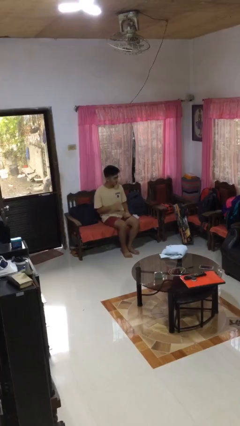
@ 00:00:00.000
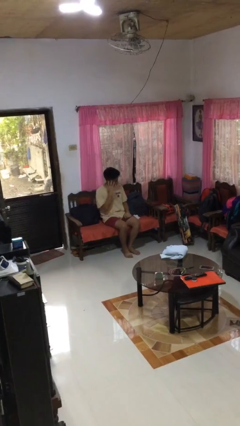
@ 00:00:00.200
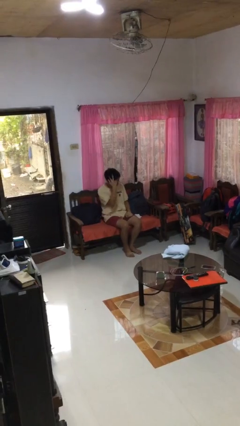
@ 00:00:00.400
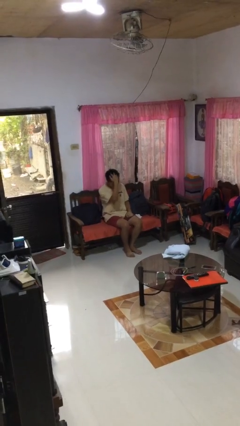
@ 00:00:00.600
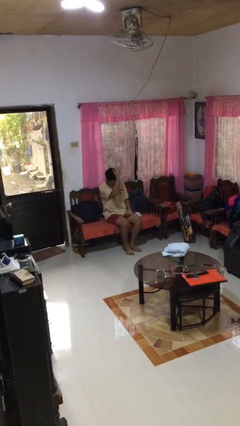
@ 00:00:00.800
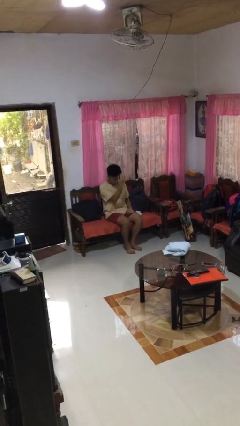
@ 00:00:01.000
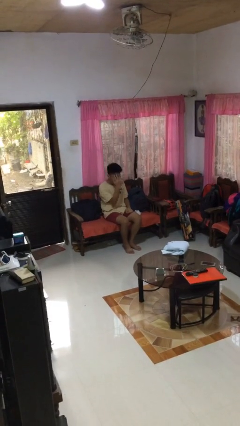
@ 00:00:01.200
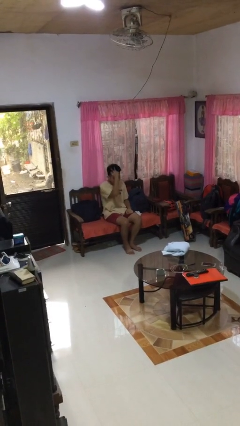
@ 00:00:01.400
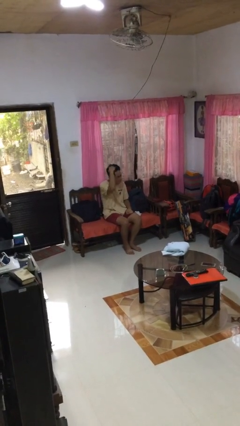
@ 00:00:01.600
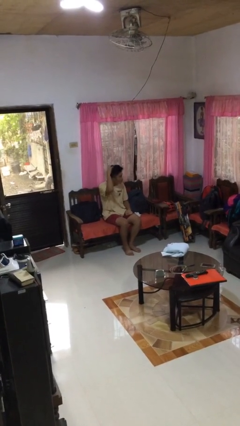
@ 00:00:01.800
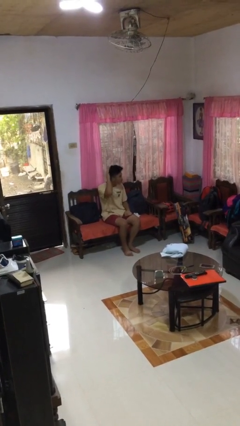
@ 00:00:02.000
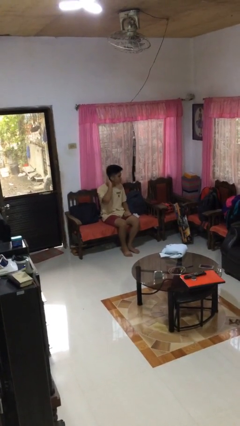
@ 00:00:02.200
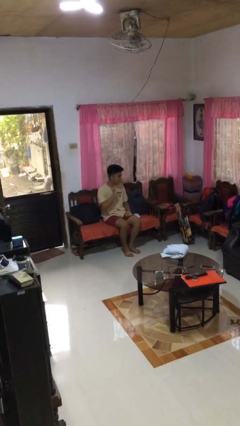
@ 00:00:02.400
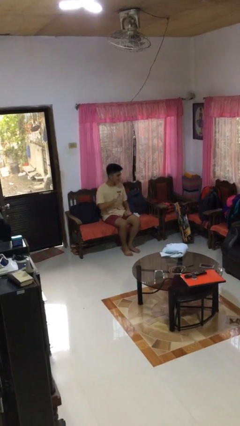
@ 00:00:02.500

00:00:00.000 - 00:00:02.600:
person strokes hair

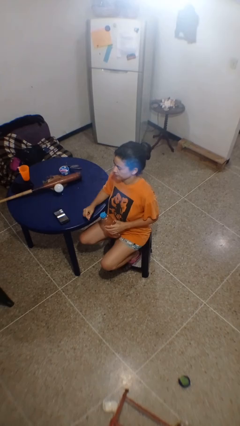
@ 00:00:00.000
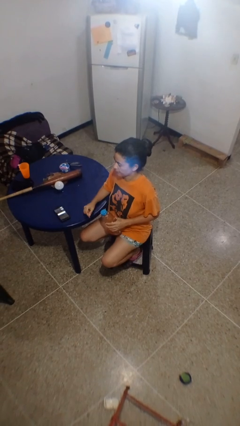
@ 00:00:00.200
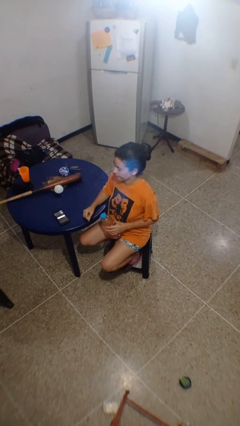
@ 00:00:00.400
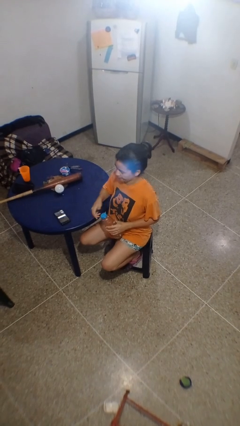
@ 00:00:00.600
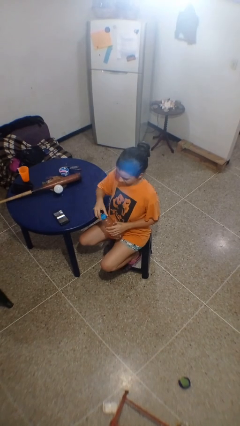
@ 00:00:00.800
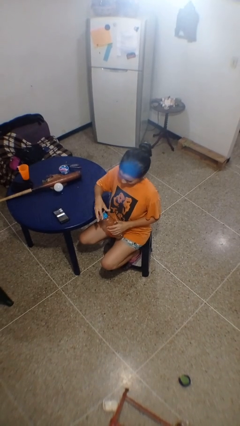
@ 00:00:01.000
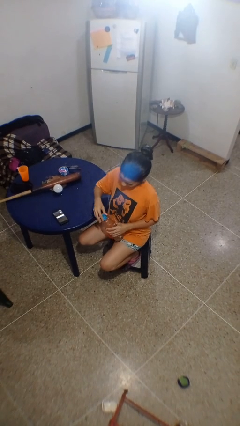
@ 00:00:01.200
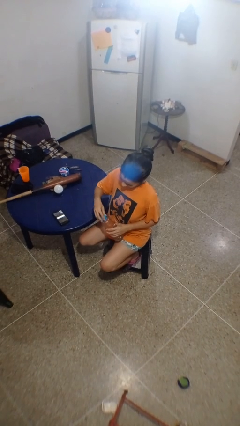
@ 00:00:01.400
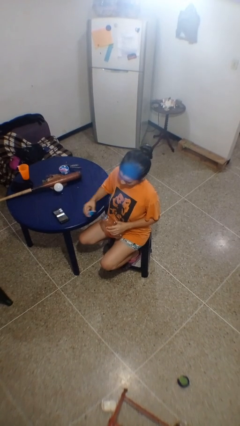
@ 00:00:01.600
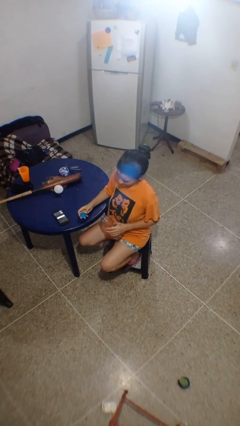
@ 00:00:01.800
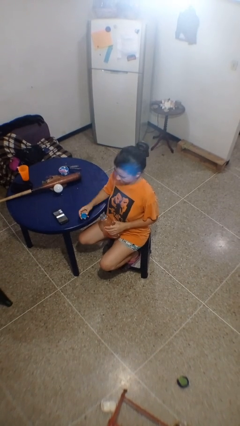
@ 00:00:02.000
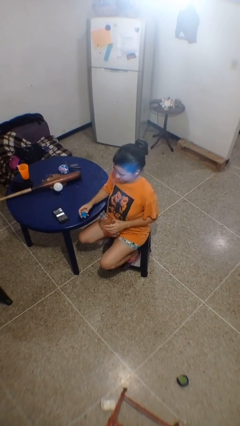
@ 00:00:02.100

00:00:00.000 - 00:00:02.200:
person unscrews lid from bottle

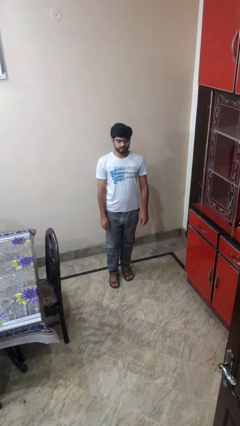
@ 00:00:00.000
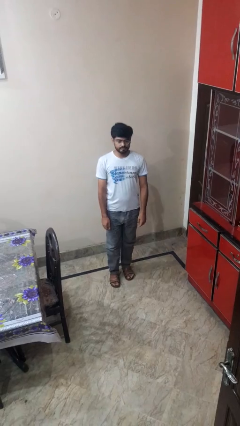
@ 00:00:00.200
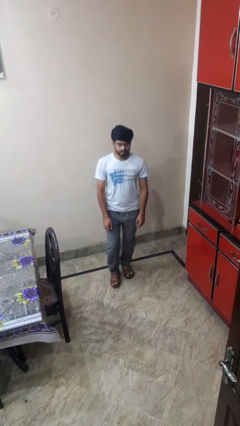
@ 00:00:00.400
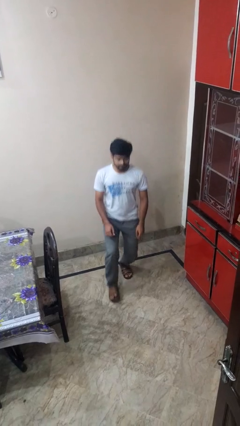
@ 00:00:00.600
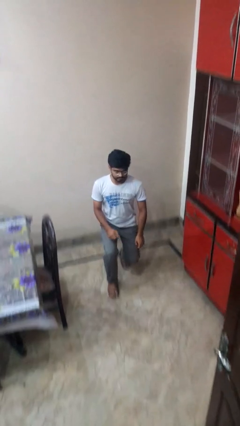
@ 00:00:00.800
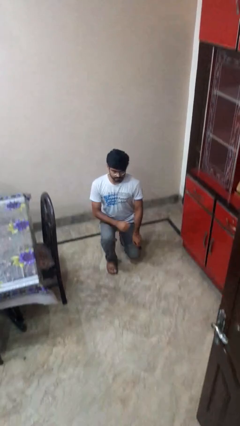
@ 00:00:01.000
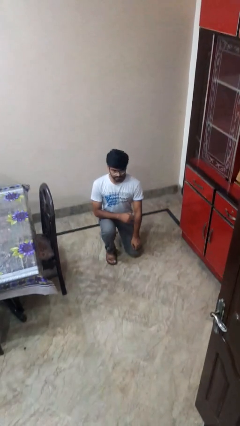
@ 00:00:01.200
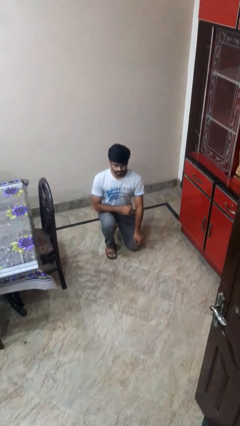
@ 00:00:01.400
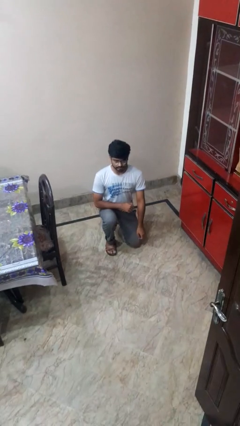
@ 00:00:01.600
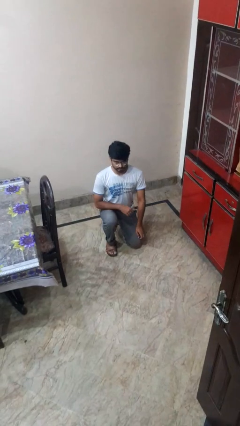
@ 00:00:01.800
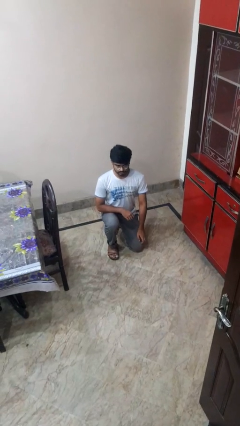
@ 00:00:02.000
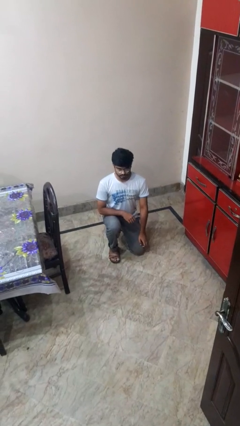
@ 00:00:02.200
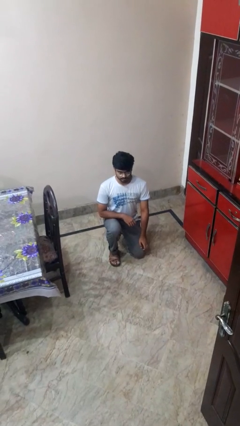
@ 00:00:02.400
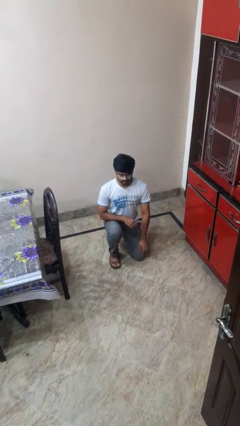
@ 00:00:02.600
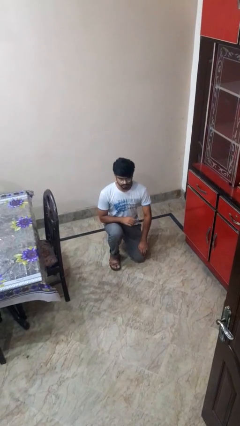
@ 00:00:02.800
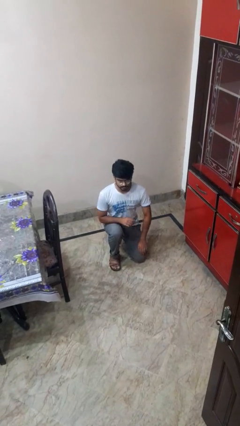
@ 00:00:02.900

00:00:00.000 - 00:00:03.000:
person kneels

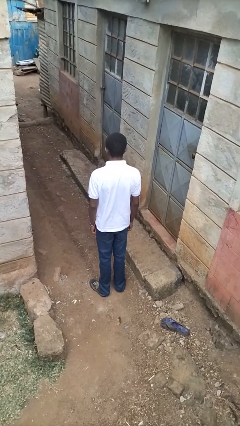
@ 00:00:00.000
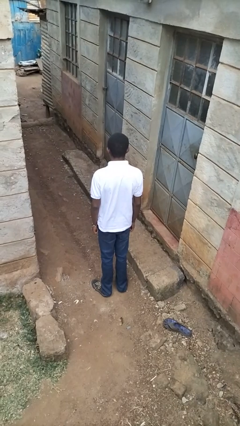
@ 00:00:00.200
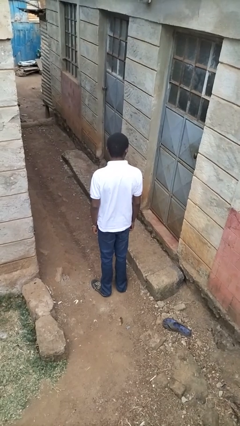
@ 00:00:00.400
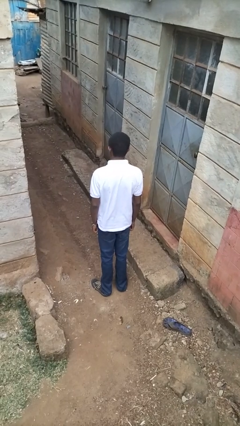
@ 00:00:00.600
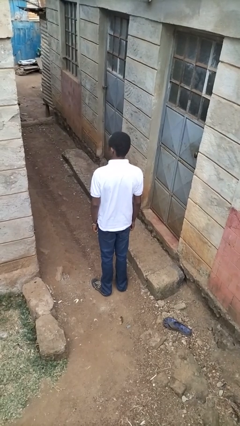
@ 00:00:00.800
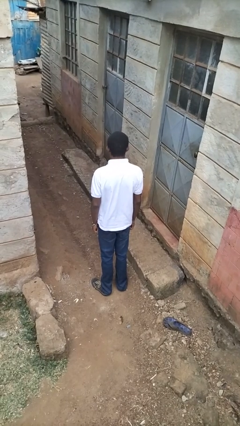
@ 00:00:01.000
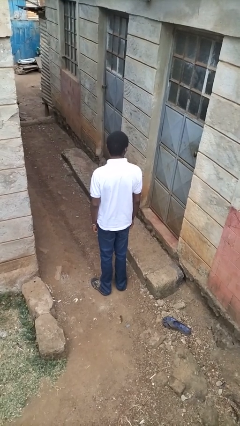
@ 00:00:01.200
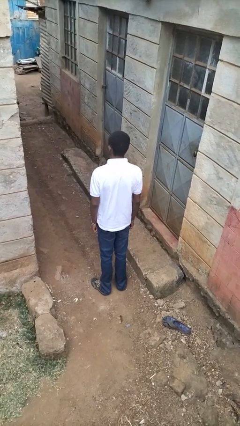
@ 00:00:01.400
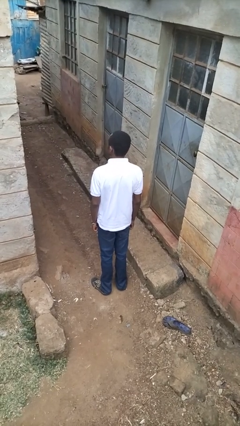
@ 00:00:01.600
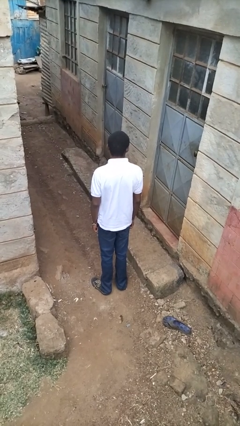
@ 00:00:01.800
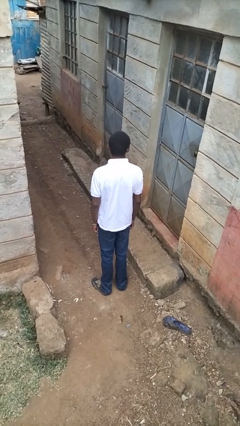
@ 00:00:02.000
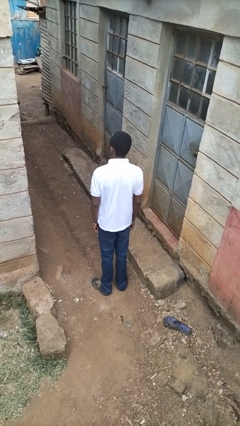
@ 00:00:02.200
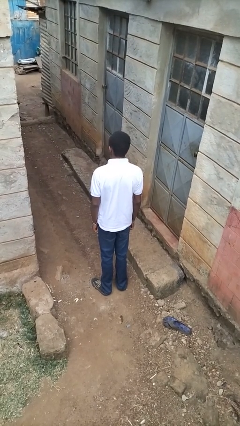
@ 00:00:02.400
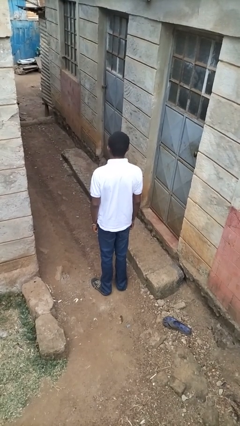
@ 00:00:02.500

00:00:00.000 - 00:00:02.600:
person shakes head

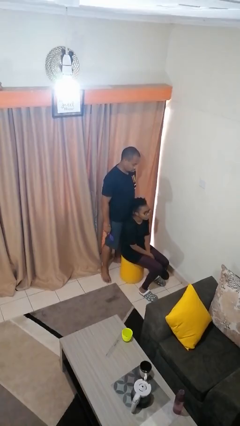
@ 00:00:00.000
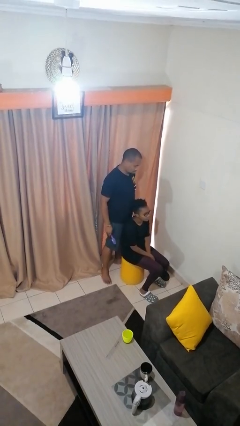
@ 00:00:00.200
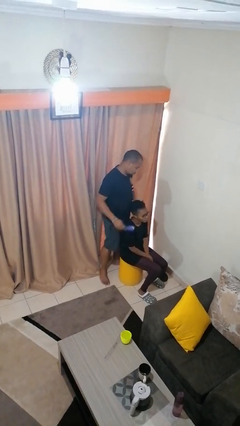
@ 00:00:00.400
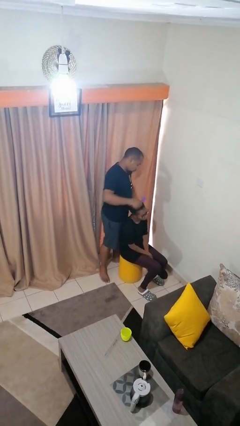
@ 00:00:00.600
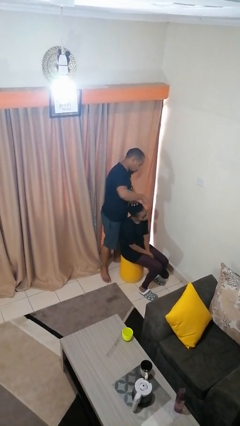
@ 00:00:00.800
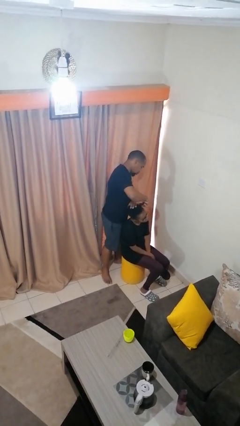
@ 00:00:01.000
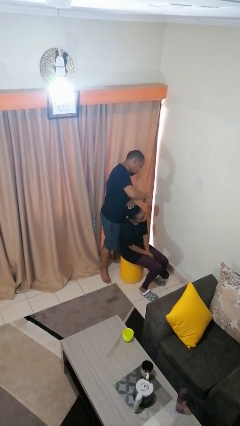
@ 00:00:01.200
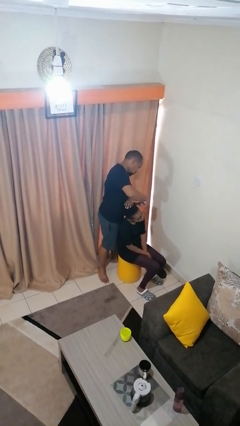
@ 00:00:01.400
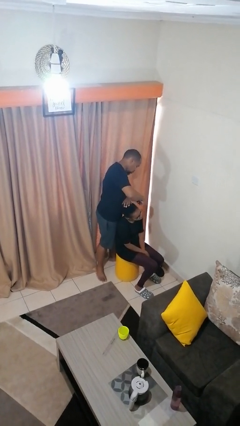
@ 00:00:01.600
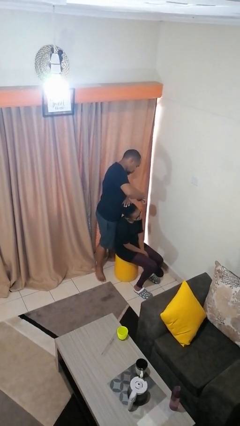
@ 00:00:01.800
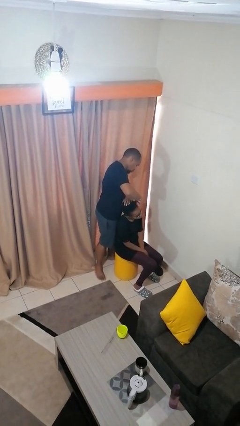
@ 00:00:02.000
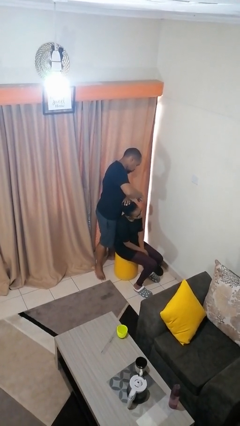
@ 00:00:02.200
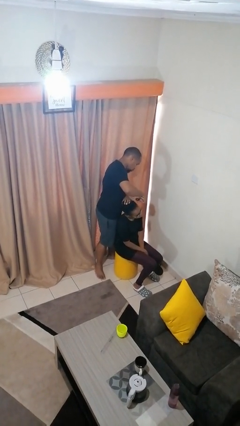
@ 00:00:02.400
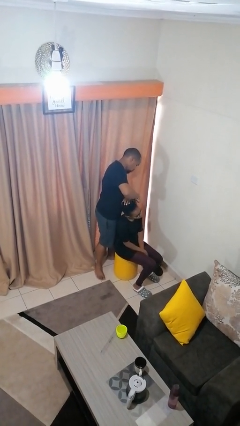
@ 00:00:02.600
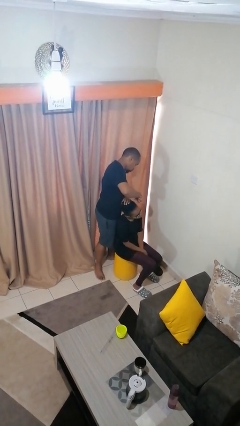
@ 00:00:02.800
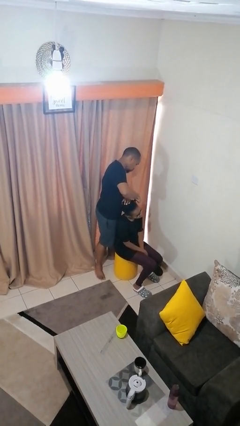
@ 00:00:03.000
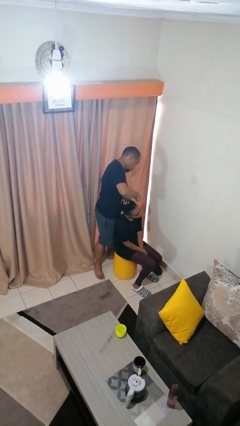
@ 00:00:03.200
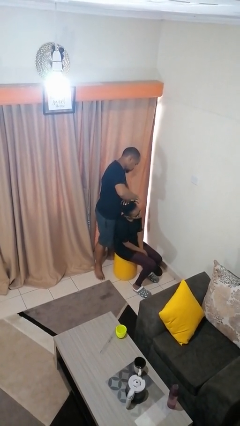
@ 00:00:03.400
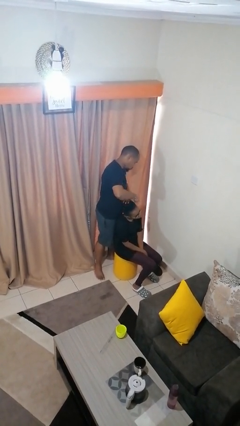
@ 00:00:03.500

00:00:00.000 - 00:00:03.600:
person brushes hair of person

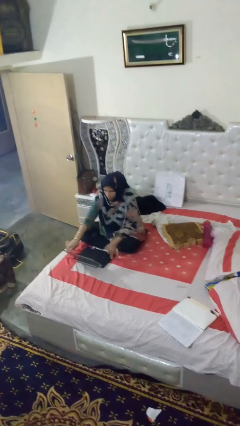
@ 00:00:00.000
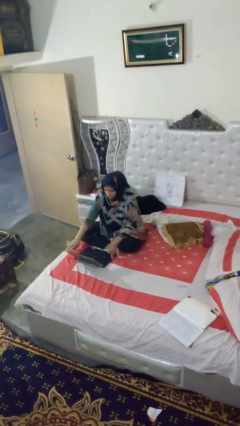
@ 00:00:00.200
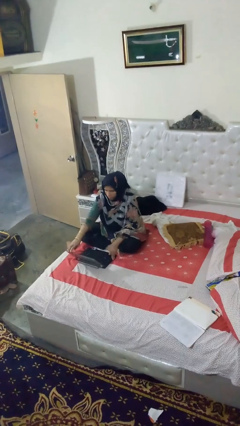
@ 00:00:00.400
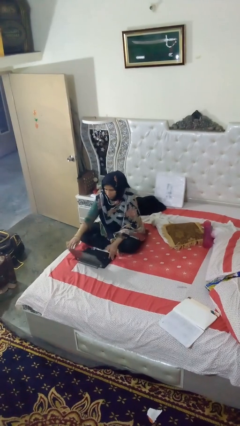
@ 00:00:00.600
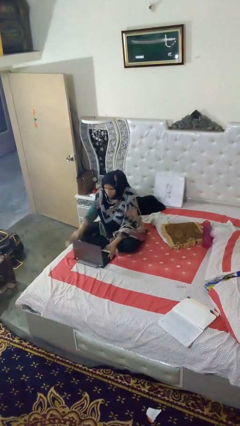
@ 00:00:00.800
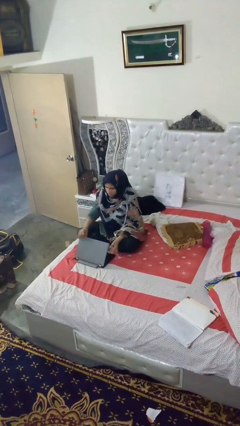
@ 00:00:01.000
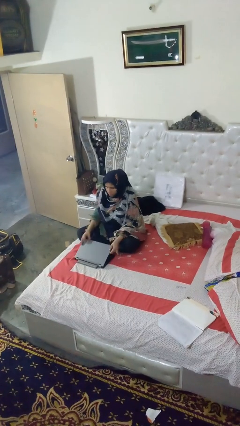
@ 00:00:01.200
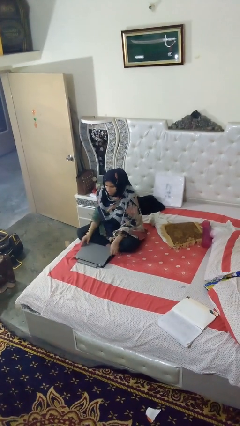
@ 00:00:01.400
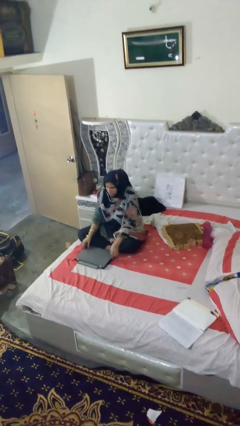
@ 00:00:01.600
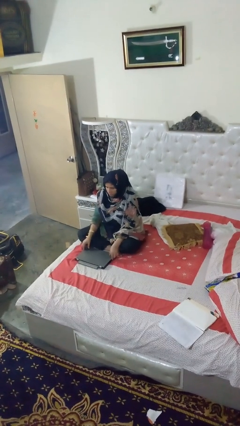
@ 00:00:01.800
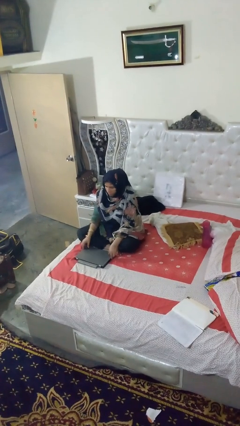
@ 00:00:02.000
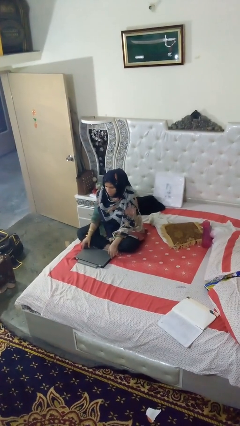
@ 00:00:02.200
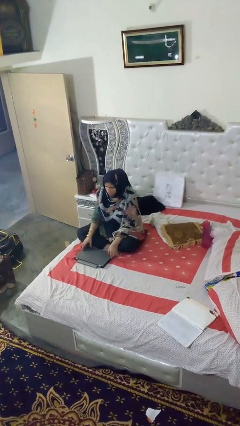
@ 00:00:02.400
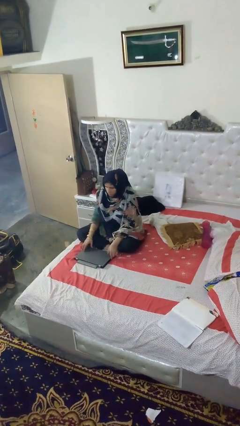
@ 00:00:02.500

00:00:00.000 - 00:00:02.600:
person closes laptop

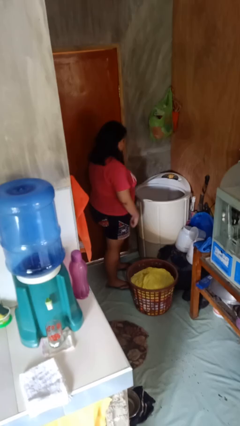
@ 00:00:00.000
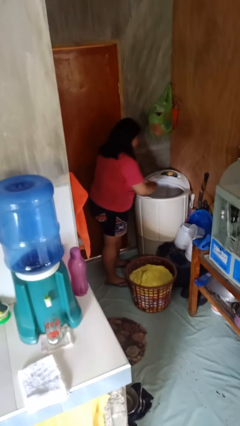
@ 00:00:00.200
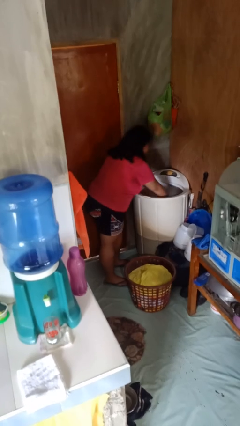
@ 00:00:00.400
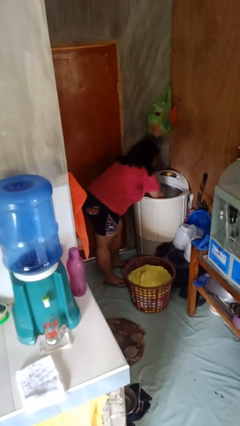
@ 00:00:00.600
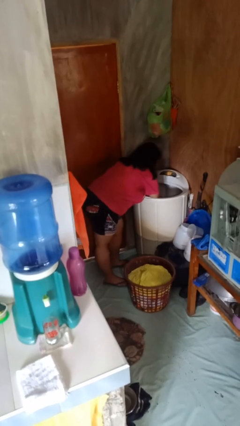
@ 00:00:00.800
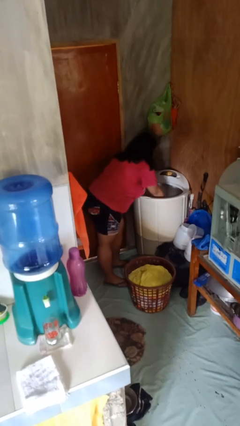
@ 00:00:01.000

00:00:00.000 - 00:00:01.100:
person unloads clotheswasher
